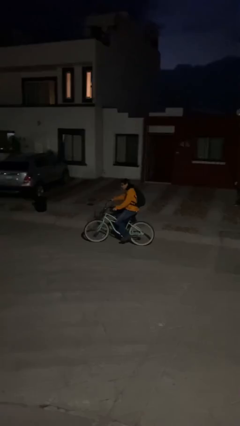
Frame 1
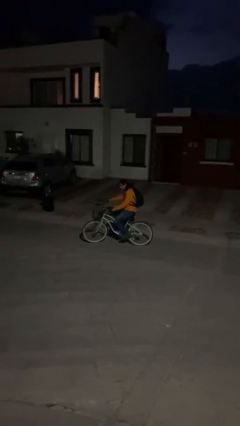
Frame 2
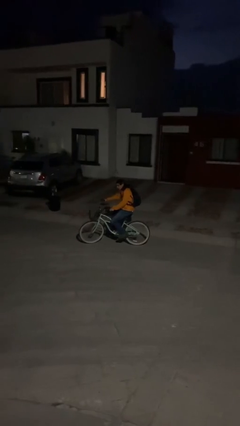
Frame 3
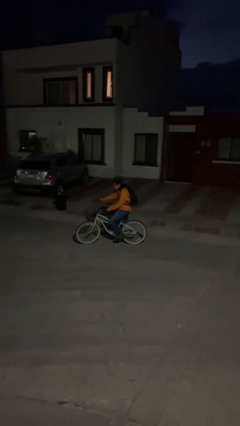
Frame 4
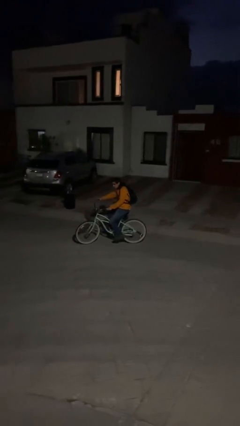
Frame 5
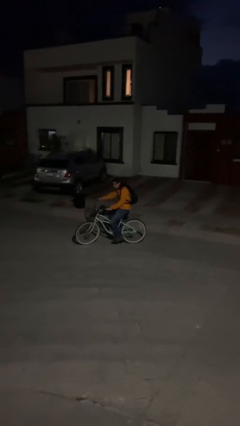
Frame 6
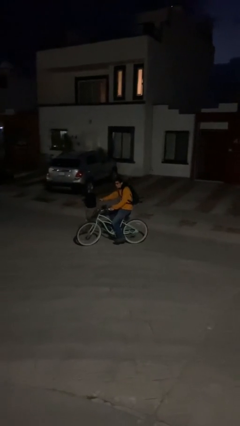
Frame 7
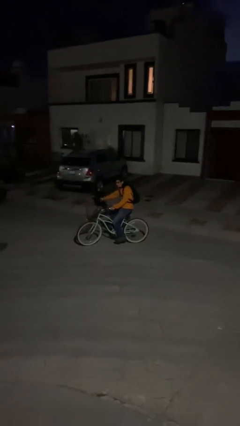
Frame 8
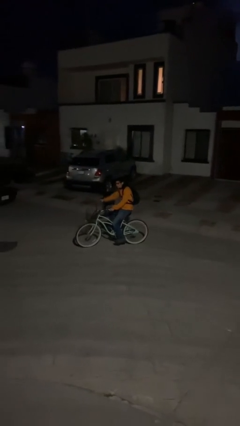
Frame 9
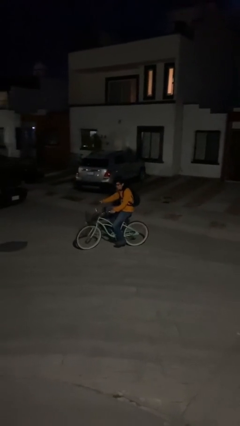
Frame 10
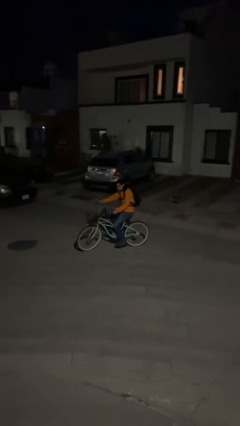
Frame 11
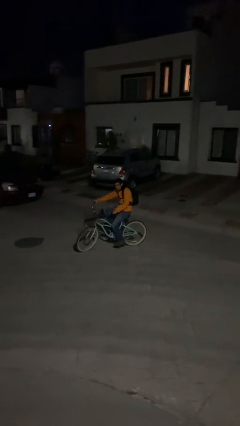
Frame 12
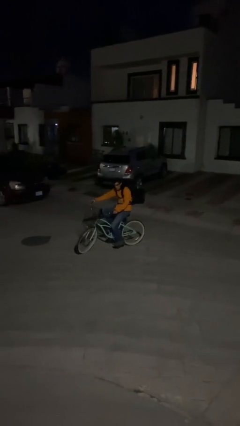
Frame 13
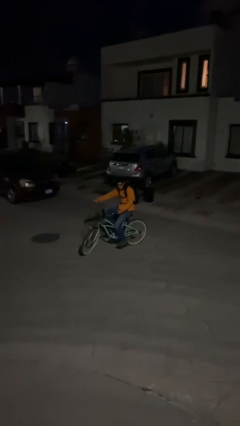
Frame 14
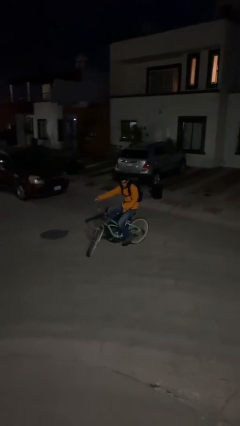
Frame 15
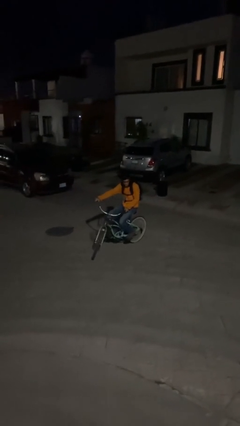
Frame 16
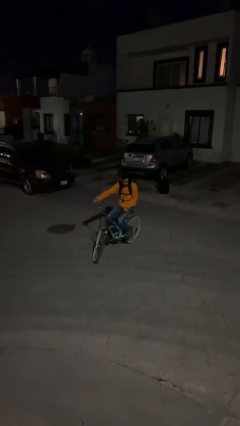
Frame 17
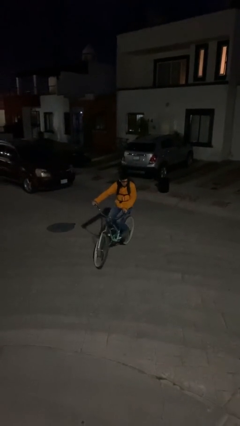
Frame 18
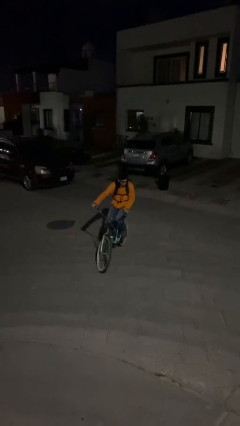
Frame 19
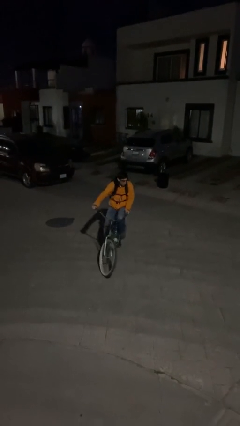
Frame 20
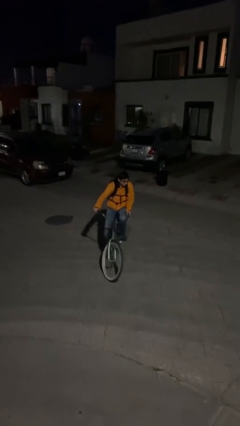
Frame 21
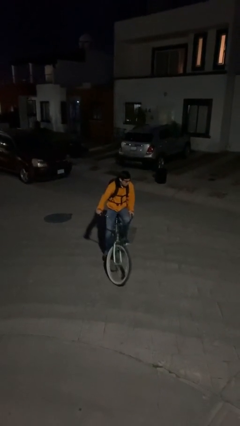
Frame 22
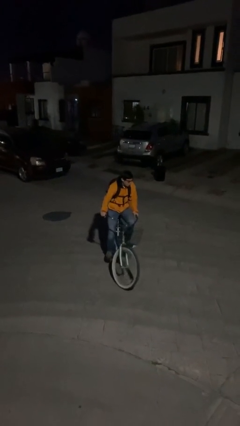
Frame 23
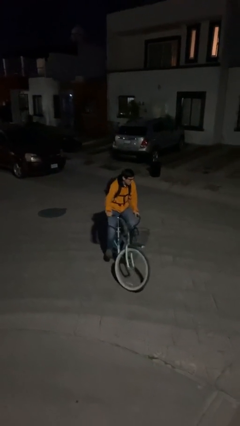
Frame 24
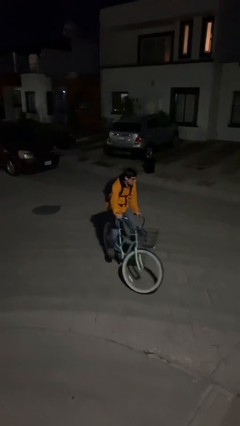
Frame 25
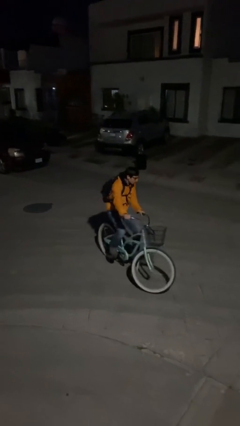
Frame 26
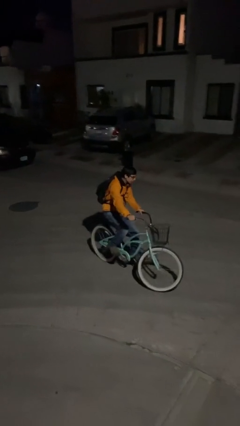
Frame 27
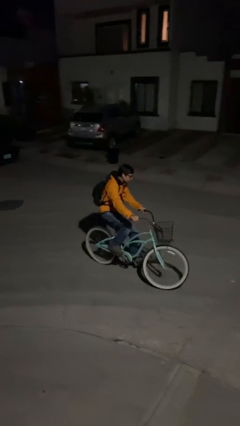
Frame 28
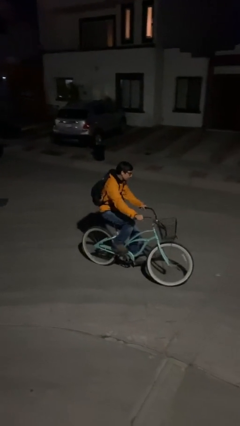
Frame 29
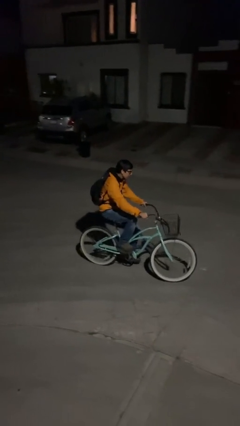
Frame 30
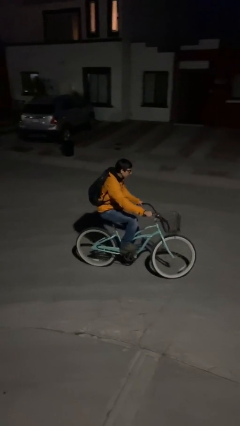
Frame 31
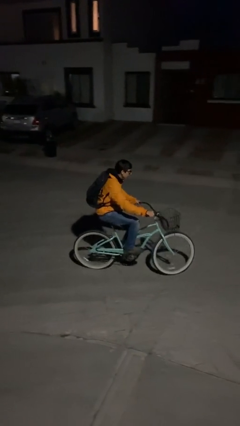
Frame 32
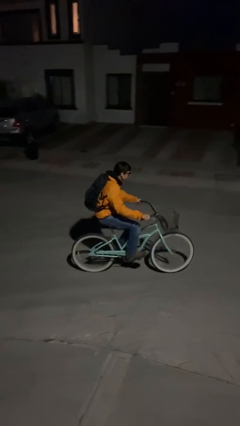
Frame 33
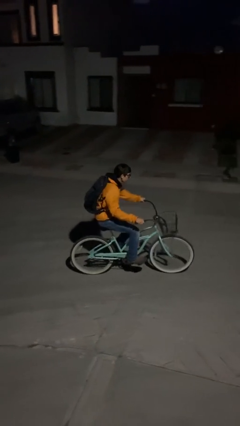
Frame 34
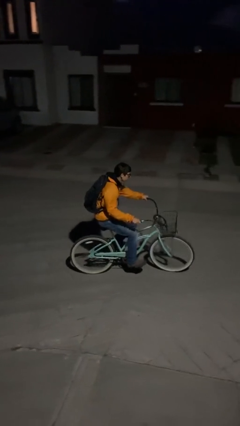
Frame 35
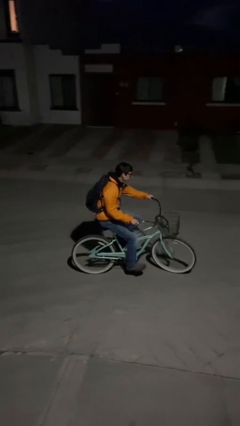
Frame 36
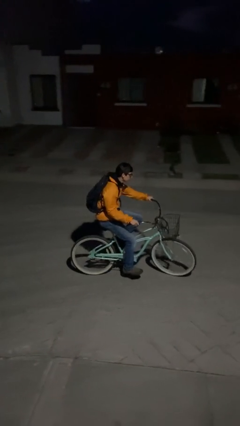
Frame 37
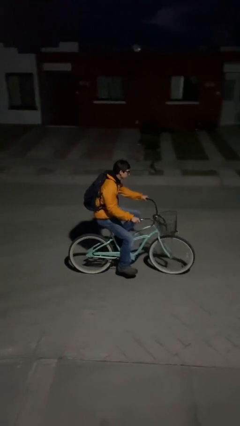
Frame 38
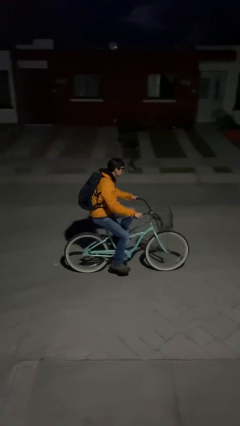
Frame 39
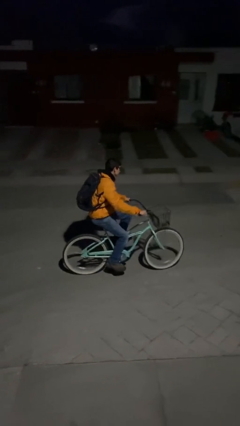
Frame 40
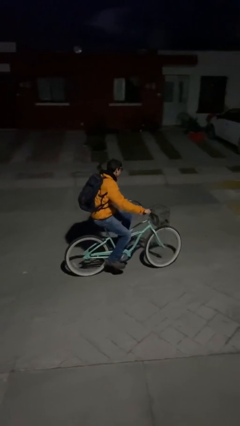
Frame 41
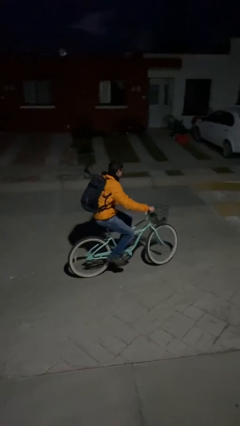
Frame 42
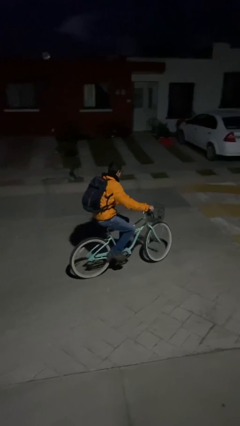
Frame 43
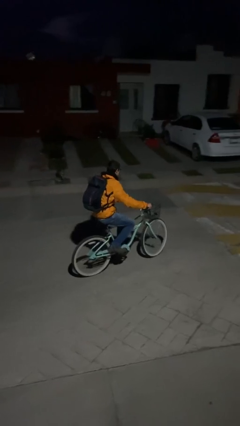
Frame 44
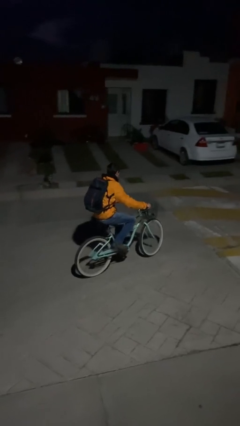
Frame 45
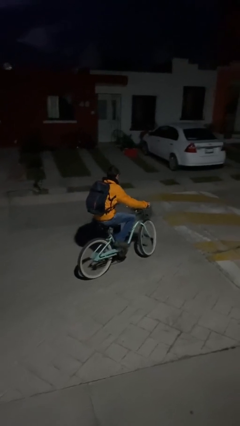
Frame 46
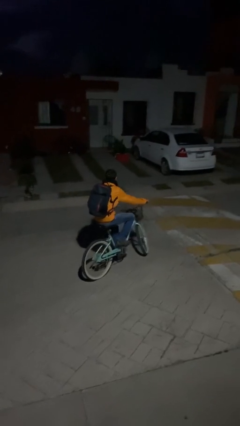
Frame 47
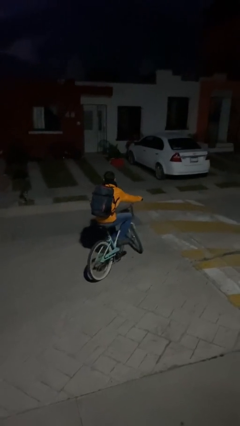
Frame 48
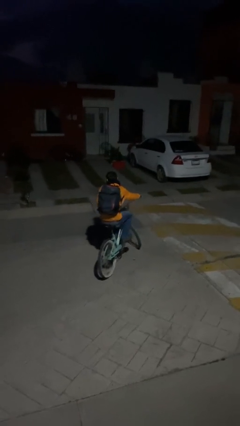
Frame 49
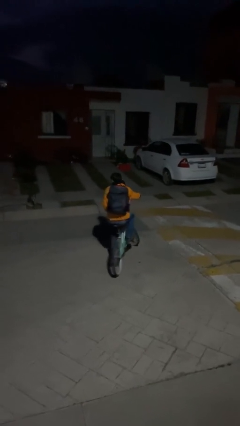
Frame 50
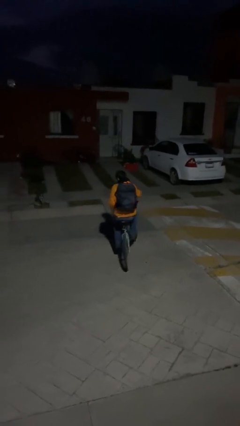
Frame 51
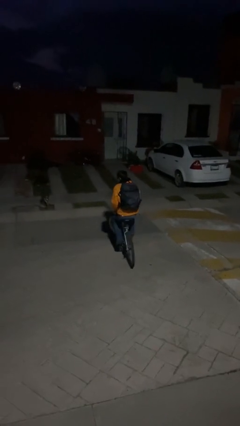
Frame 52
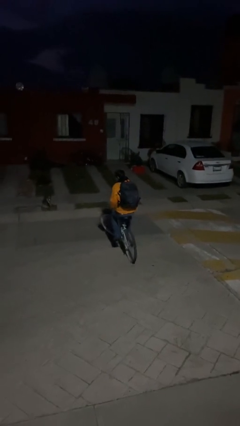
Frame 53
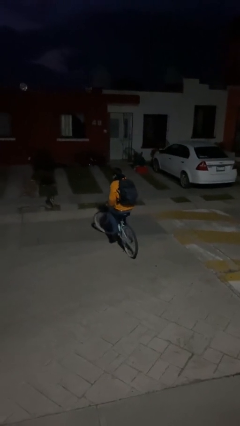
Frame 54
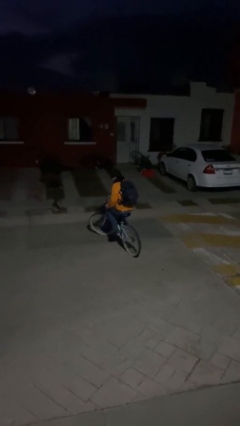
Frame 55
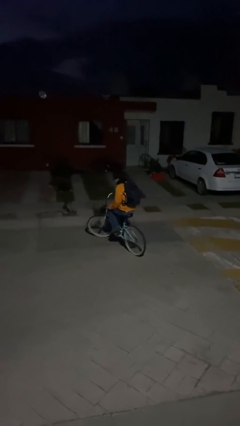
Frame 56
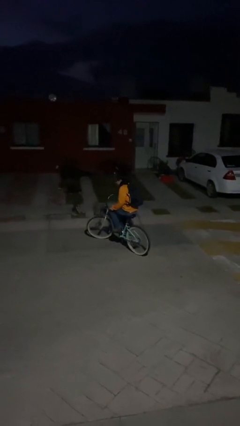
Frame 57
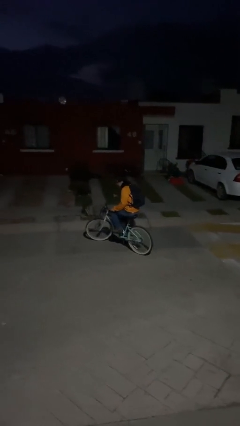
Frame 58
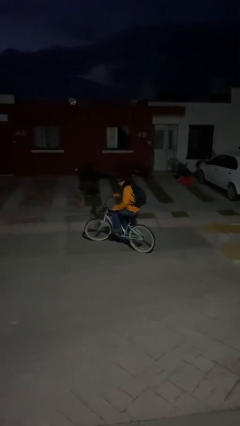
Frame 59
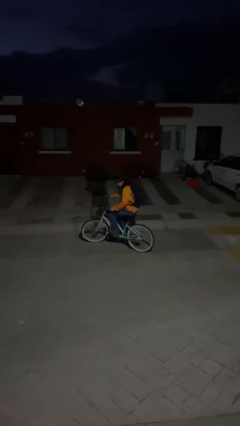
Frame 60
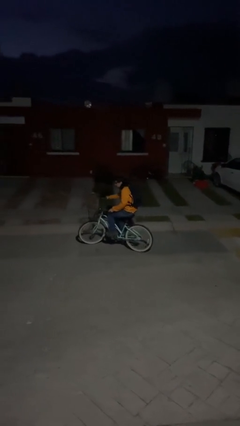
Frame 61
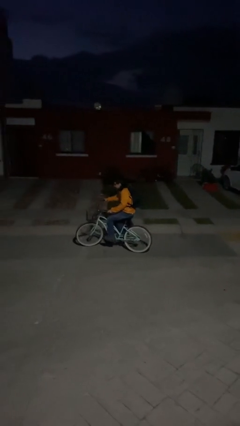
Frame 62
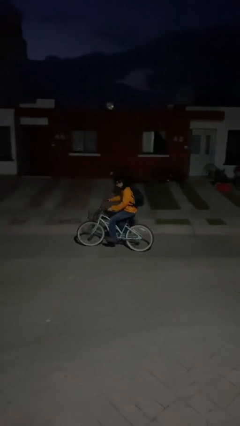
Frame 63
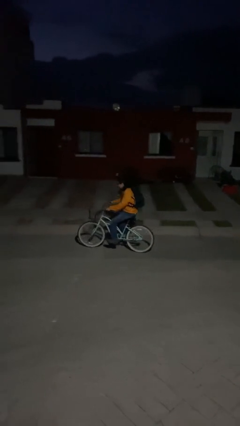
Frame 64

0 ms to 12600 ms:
person rides bicycle

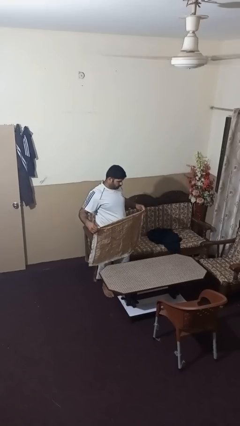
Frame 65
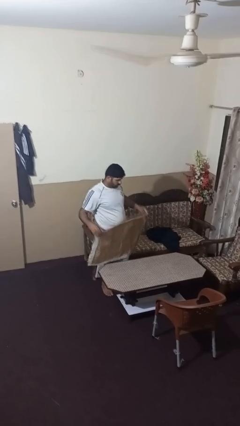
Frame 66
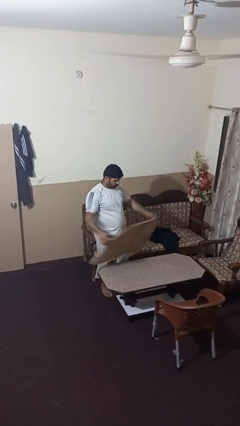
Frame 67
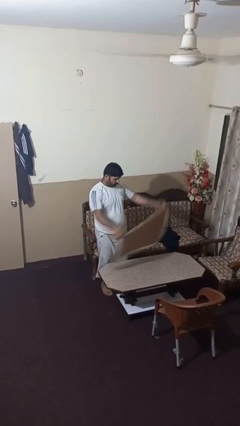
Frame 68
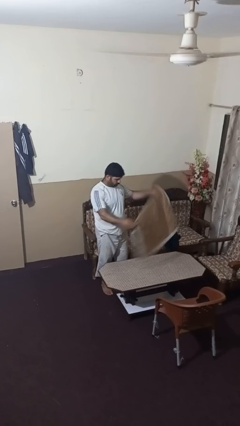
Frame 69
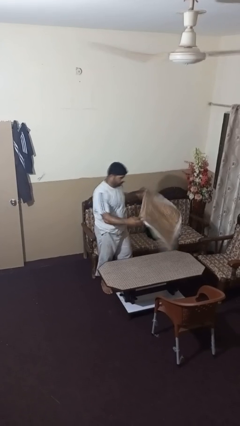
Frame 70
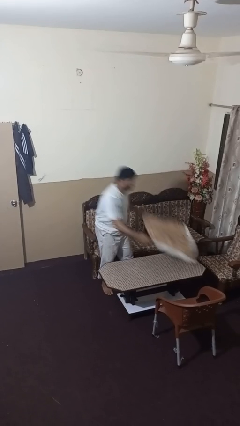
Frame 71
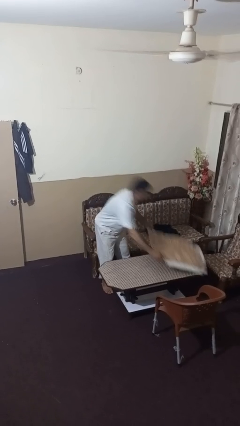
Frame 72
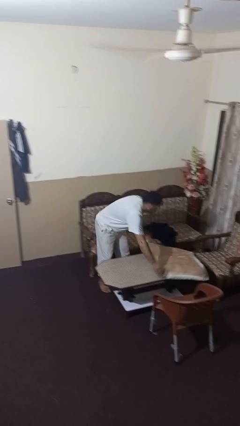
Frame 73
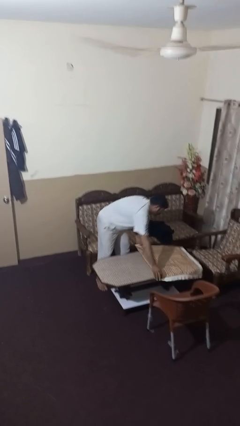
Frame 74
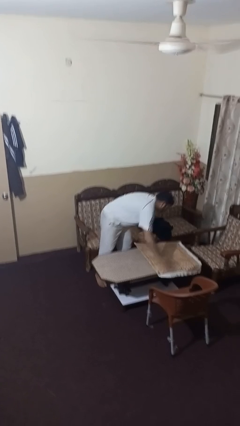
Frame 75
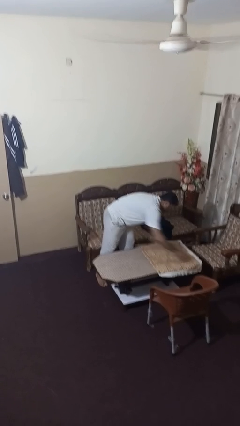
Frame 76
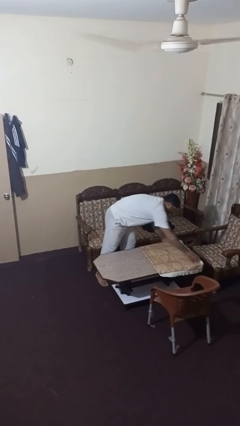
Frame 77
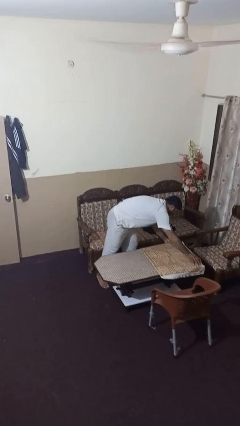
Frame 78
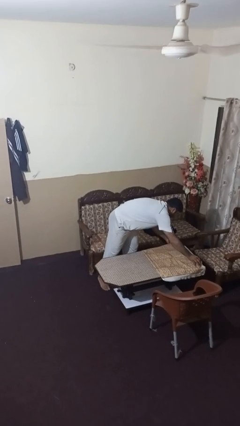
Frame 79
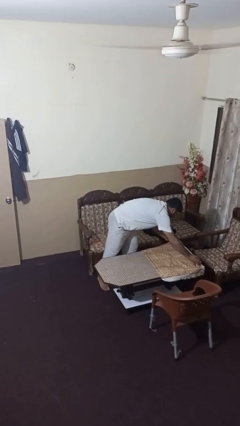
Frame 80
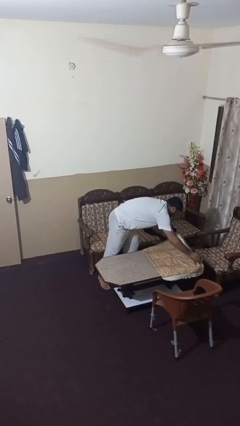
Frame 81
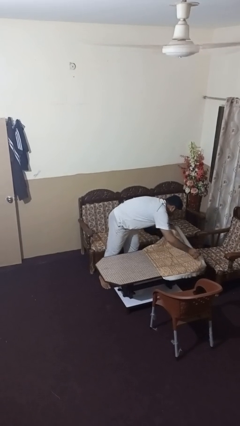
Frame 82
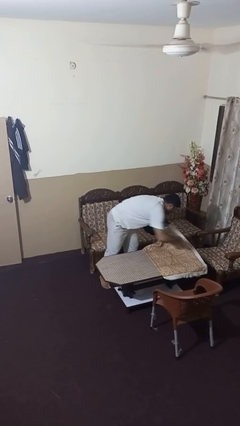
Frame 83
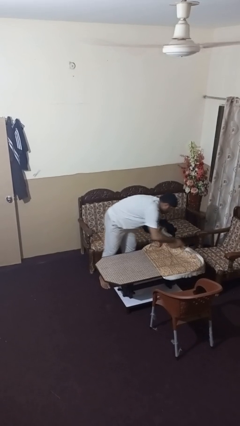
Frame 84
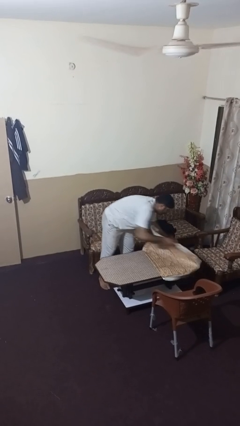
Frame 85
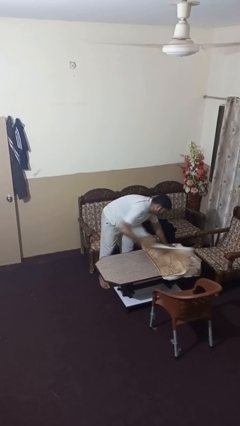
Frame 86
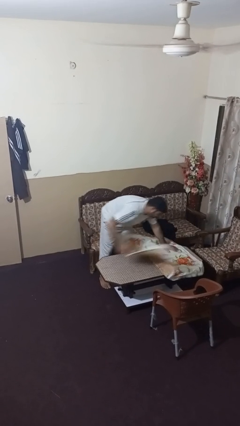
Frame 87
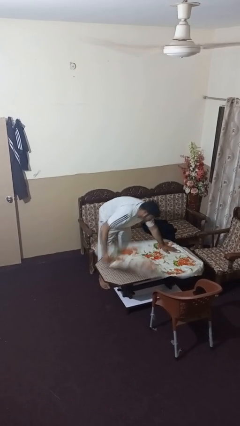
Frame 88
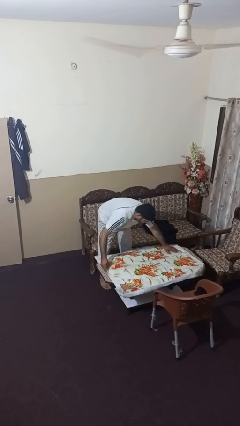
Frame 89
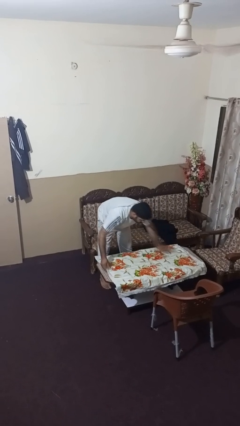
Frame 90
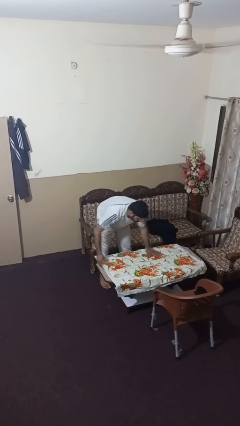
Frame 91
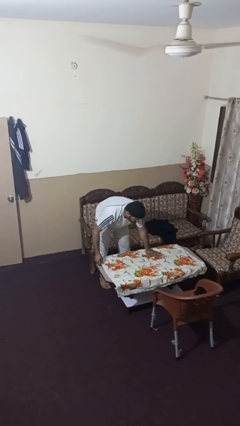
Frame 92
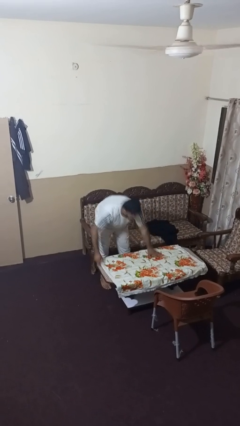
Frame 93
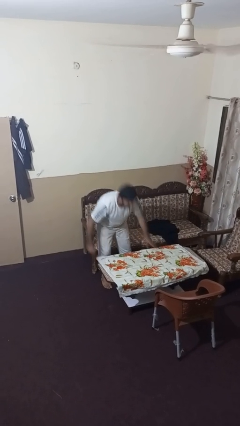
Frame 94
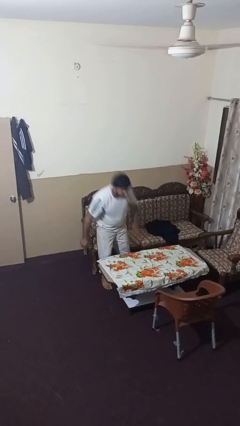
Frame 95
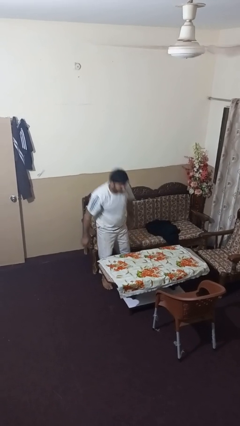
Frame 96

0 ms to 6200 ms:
person spreads tablecloth
